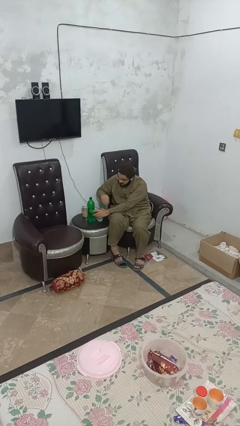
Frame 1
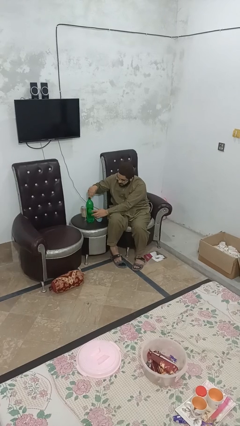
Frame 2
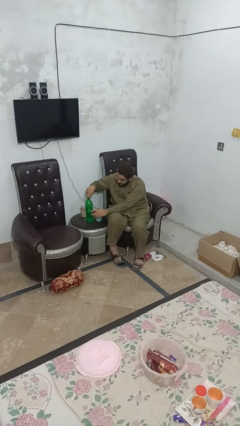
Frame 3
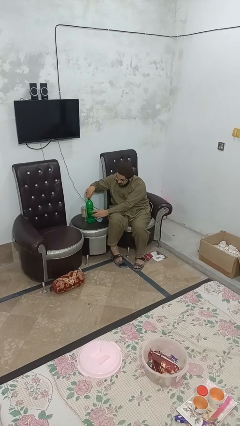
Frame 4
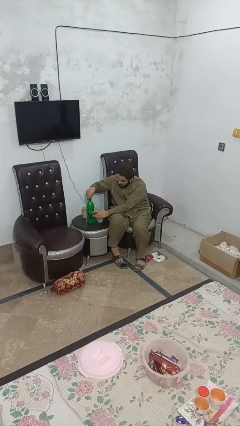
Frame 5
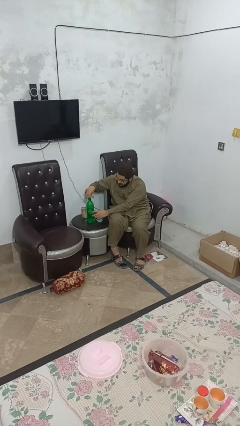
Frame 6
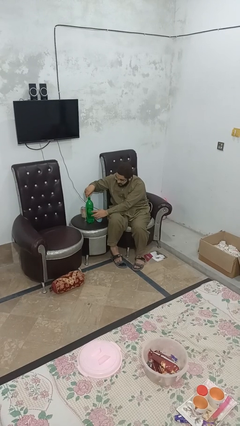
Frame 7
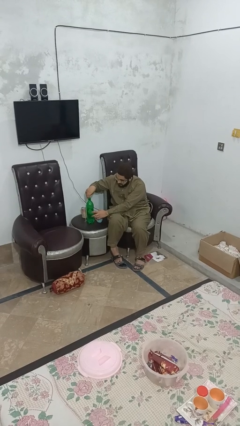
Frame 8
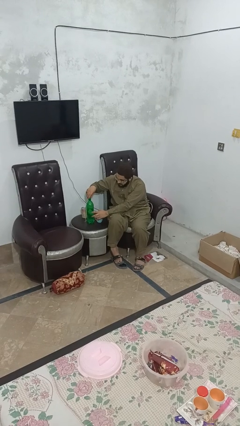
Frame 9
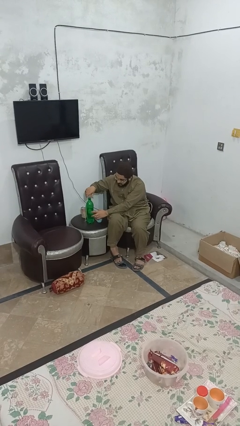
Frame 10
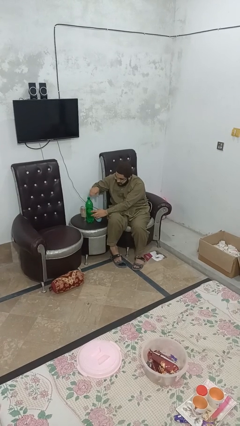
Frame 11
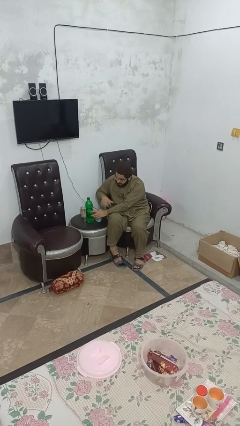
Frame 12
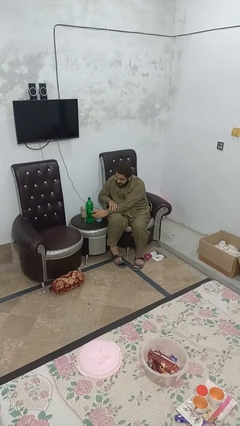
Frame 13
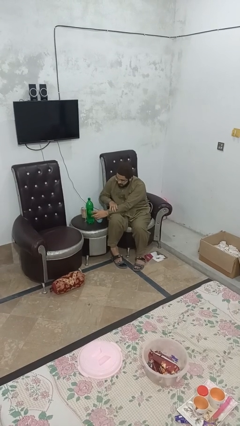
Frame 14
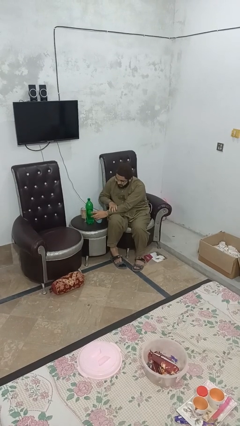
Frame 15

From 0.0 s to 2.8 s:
person screws lid to bottle

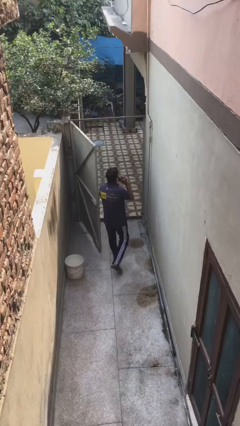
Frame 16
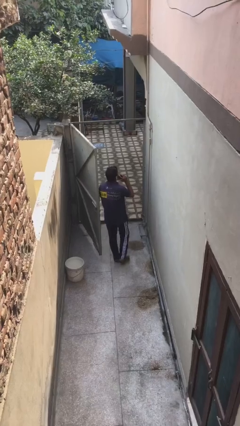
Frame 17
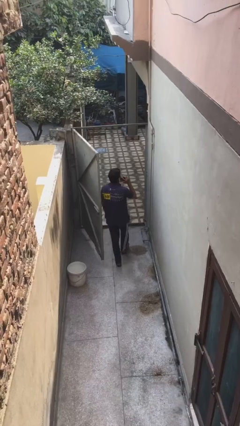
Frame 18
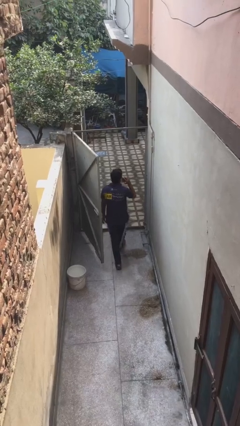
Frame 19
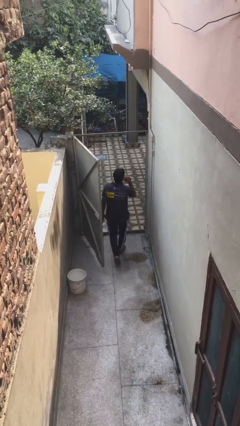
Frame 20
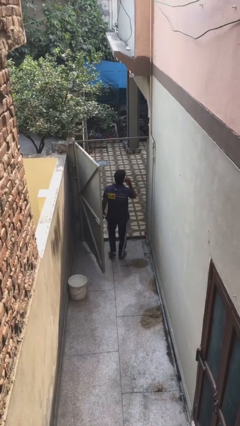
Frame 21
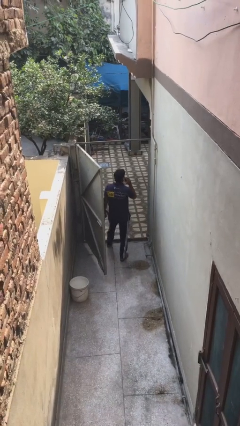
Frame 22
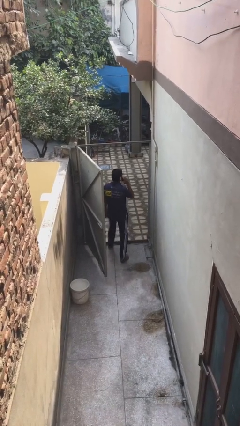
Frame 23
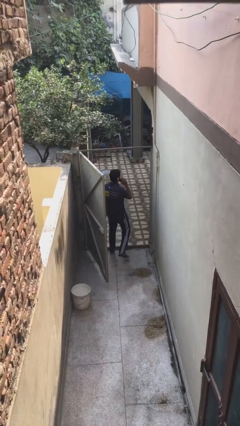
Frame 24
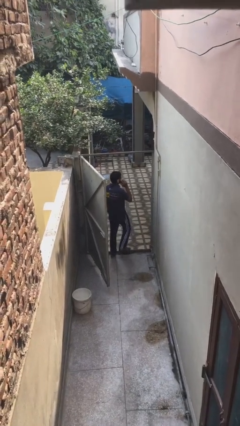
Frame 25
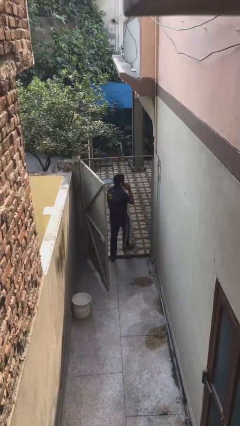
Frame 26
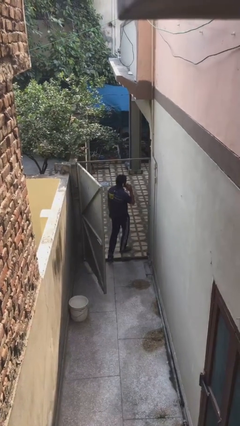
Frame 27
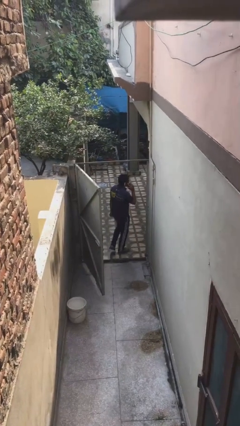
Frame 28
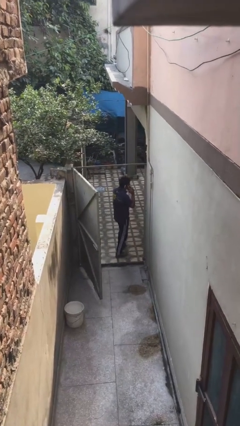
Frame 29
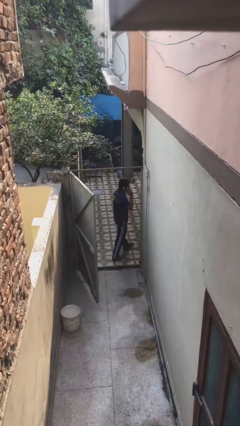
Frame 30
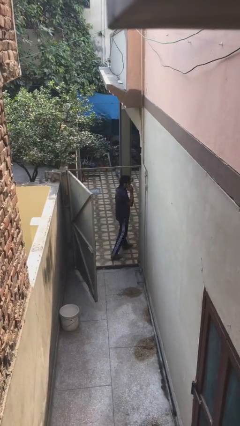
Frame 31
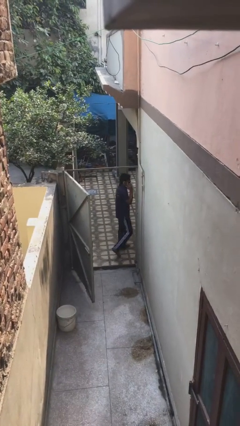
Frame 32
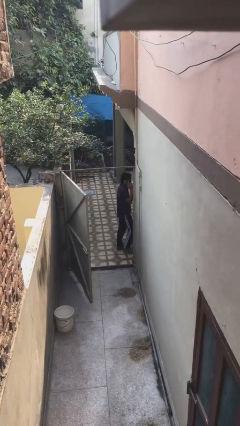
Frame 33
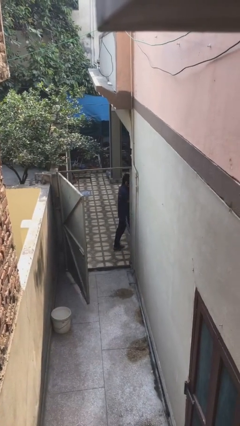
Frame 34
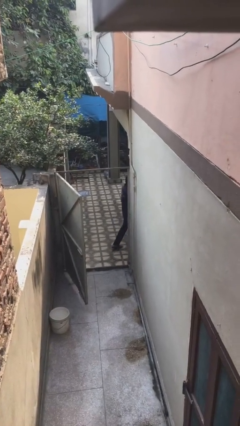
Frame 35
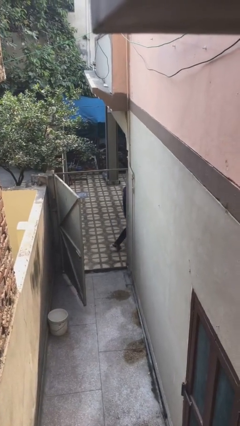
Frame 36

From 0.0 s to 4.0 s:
person exits scene through structure

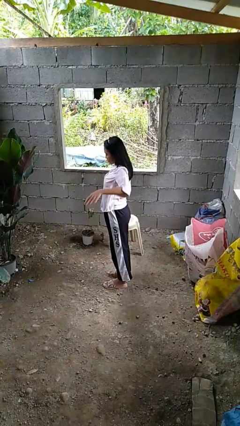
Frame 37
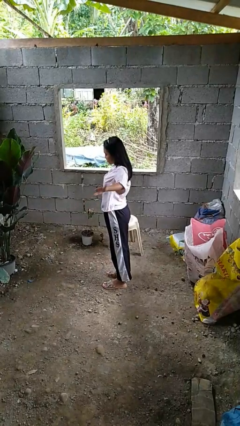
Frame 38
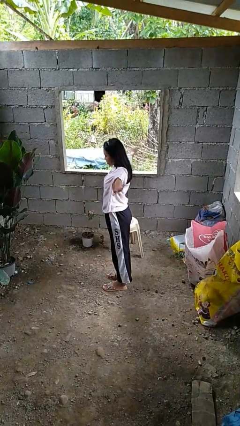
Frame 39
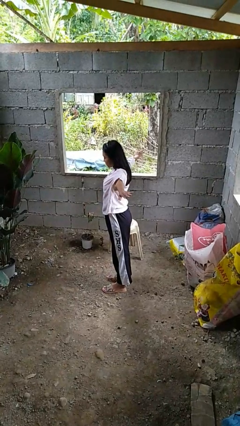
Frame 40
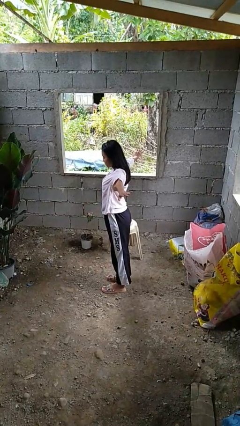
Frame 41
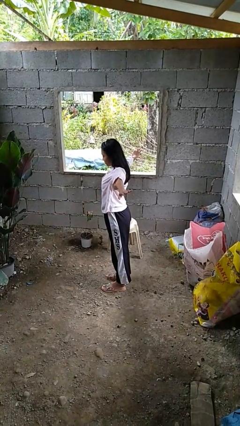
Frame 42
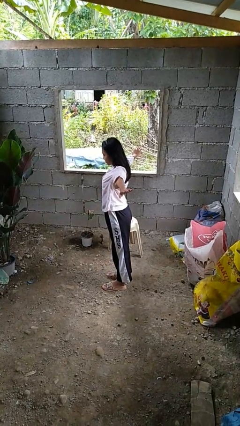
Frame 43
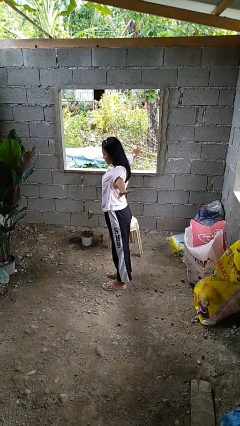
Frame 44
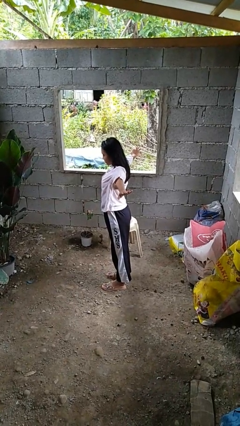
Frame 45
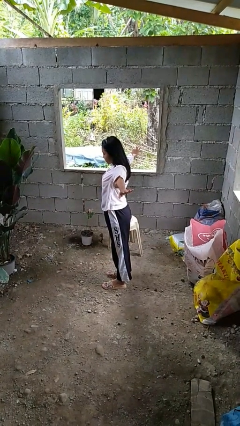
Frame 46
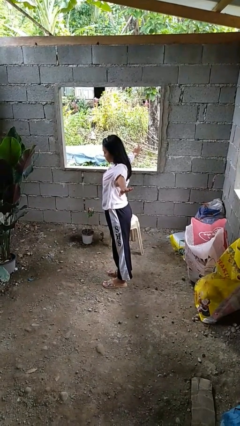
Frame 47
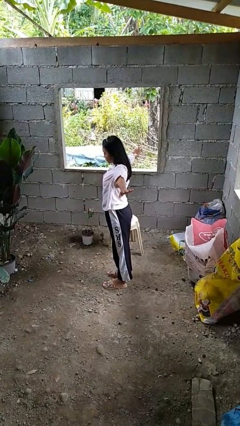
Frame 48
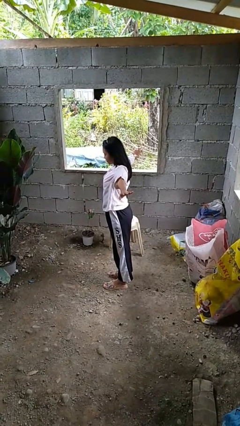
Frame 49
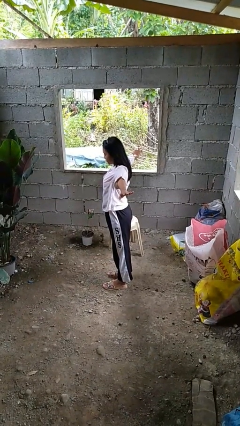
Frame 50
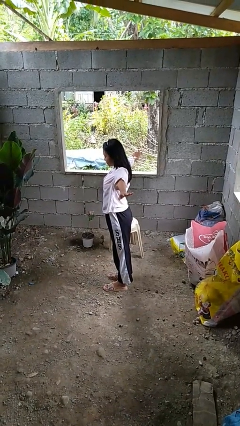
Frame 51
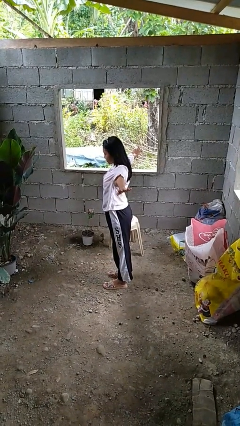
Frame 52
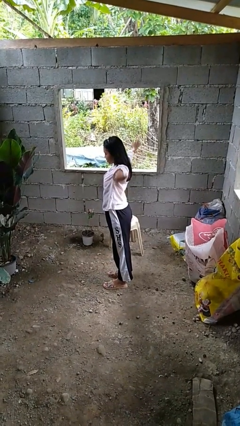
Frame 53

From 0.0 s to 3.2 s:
person stretches arms to side

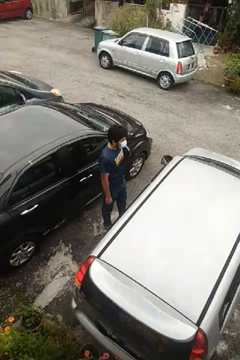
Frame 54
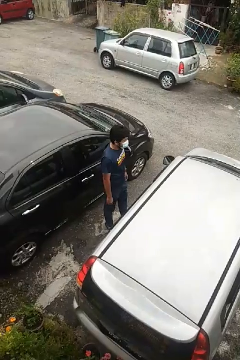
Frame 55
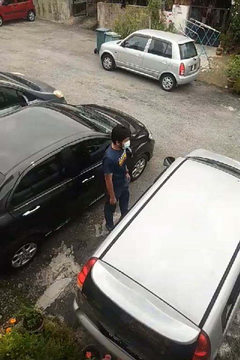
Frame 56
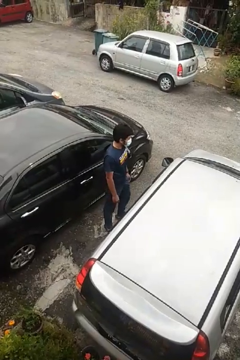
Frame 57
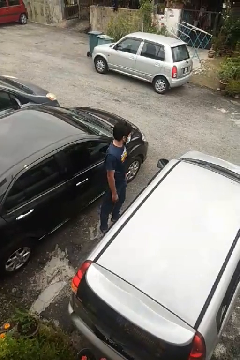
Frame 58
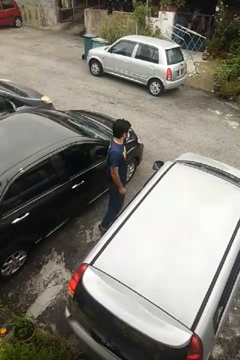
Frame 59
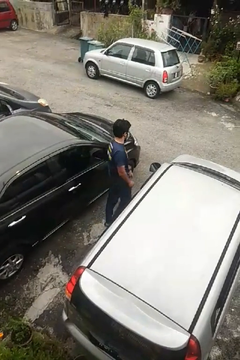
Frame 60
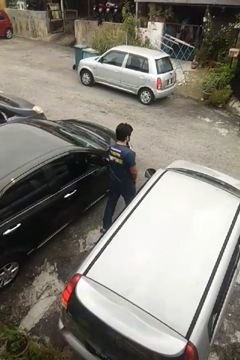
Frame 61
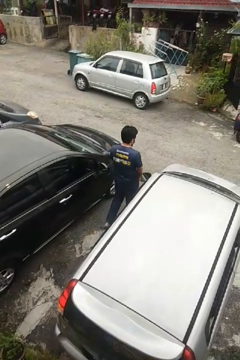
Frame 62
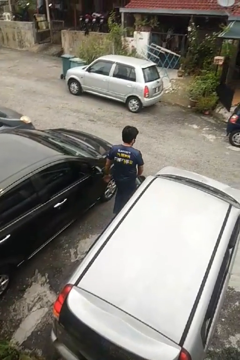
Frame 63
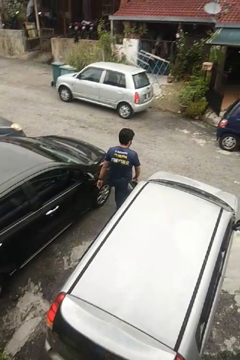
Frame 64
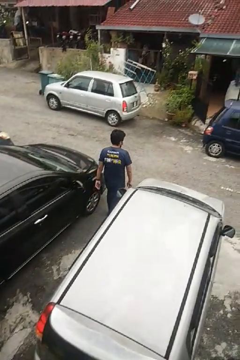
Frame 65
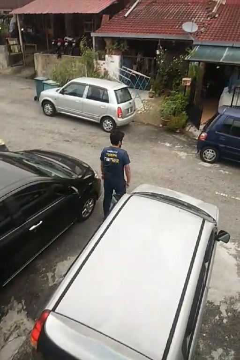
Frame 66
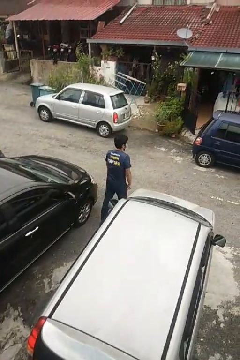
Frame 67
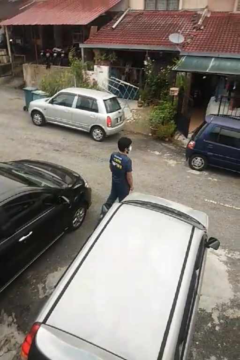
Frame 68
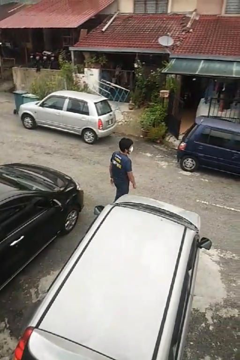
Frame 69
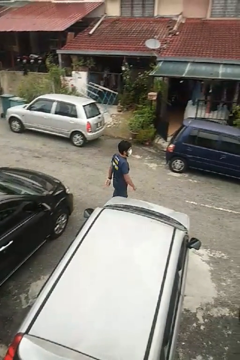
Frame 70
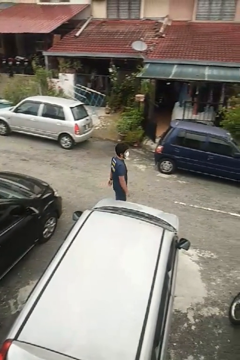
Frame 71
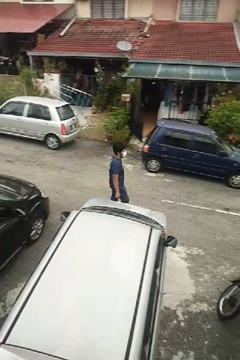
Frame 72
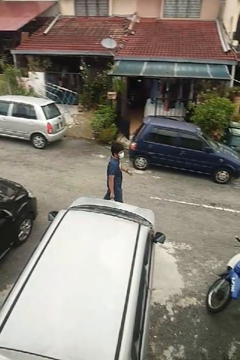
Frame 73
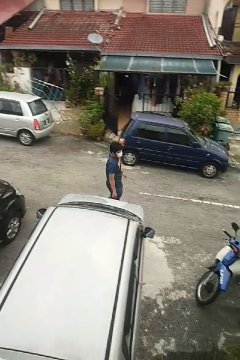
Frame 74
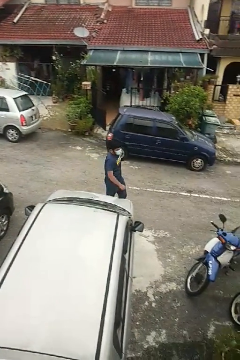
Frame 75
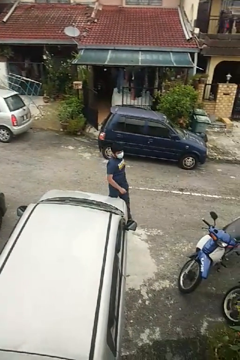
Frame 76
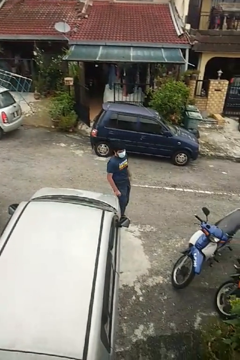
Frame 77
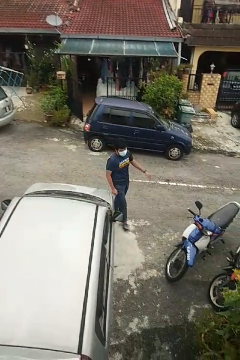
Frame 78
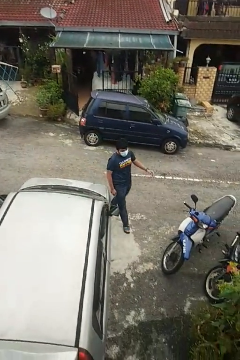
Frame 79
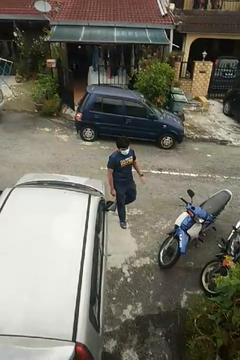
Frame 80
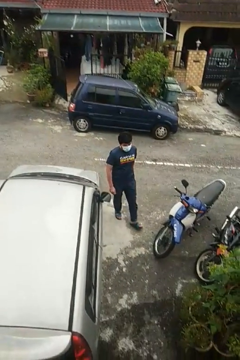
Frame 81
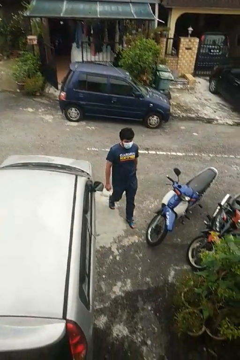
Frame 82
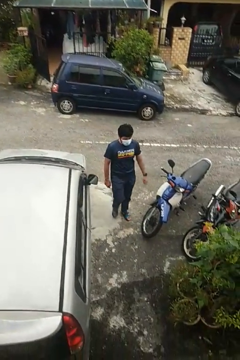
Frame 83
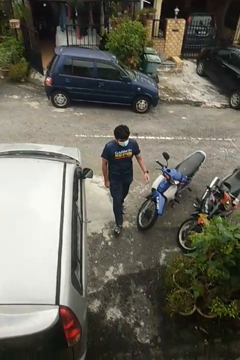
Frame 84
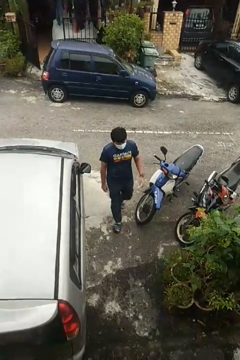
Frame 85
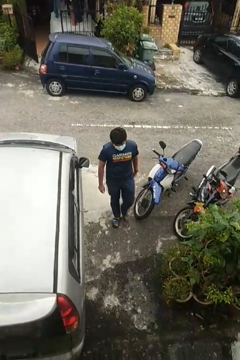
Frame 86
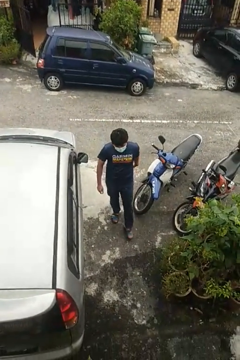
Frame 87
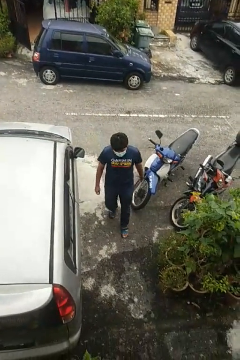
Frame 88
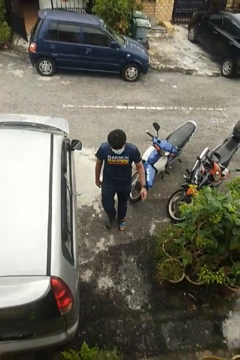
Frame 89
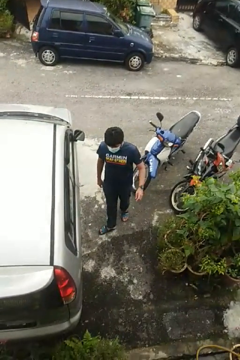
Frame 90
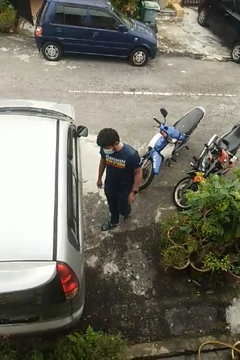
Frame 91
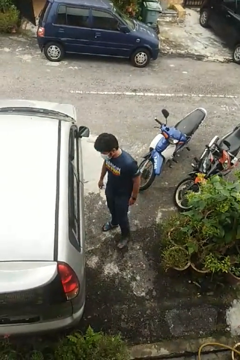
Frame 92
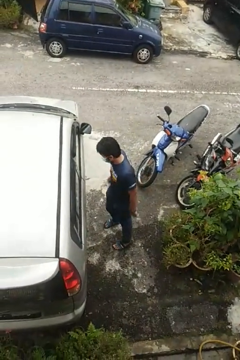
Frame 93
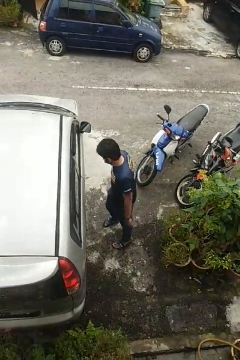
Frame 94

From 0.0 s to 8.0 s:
person walks around car

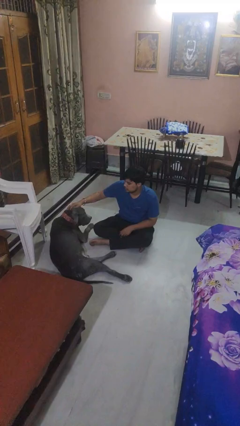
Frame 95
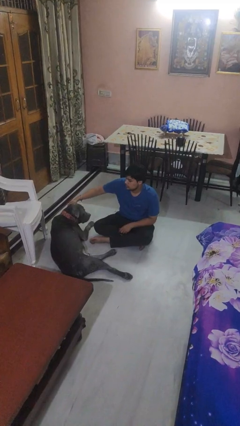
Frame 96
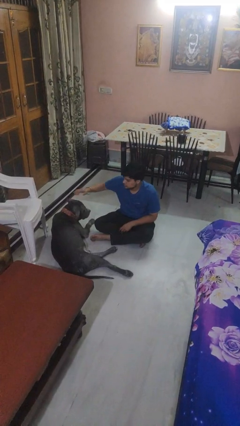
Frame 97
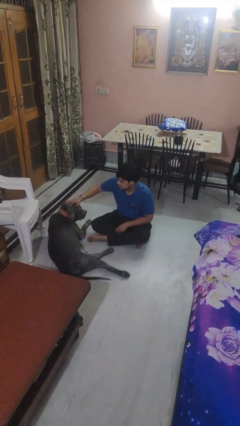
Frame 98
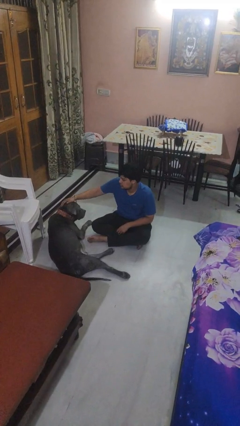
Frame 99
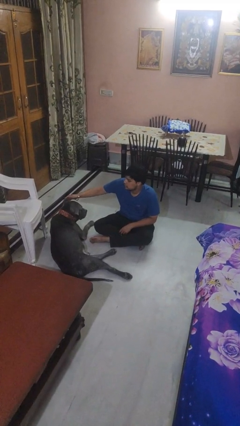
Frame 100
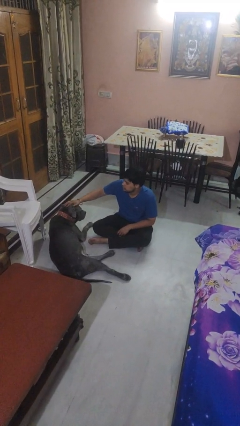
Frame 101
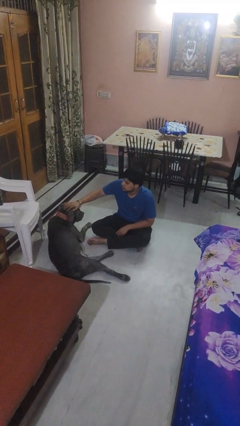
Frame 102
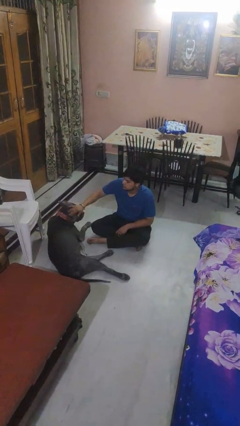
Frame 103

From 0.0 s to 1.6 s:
person pets dog
